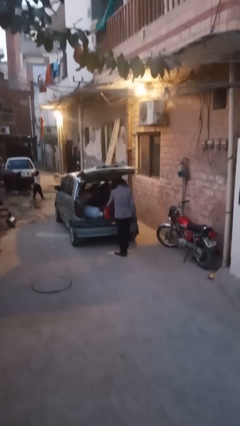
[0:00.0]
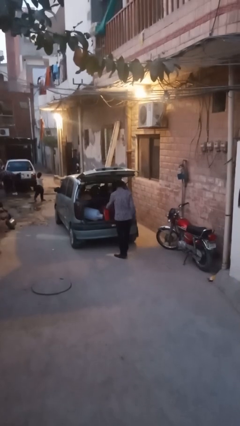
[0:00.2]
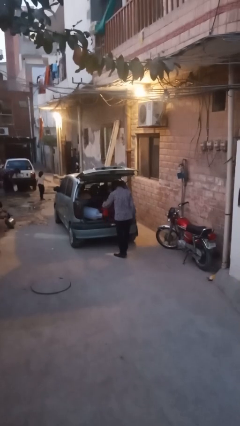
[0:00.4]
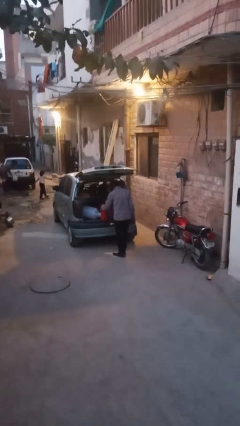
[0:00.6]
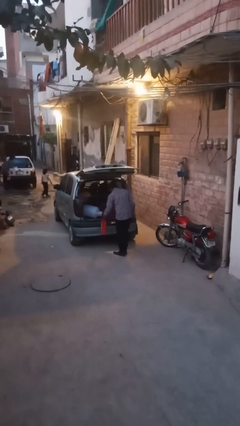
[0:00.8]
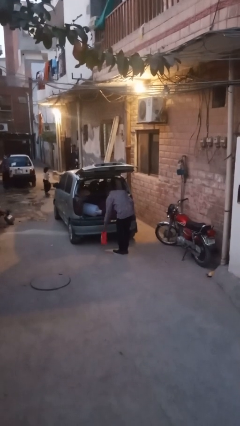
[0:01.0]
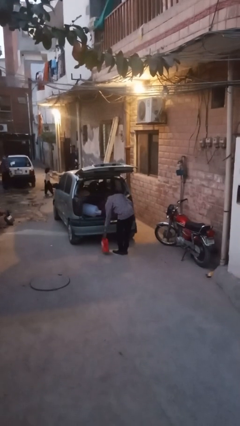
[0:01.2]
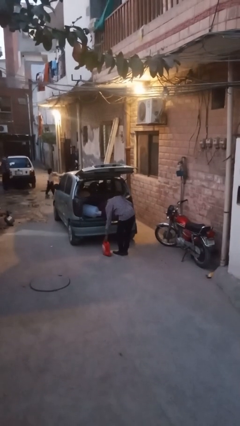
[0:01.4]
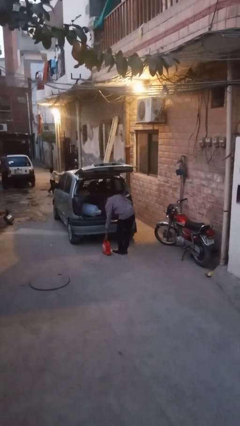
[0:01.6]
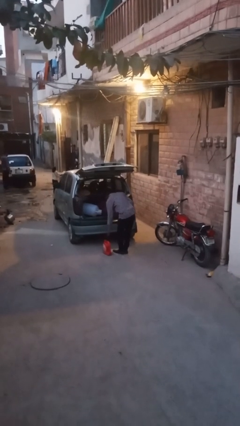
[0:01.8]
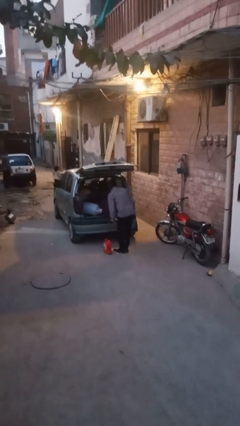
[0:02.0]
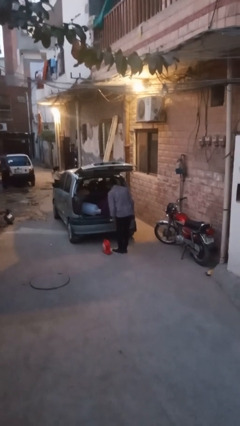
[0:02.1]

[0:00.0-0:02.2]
person unloads car

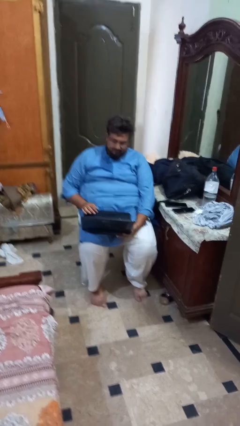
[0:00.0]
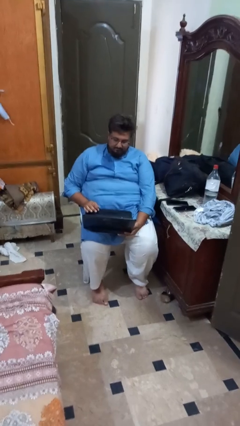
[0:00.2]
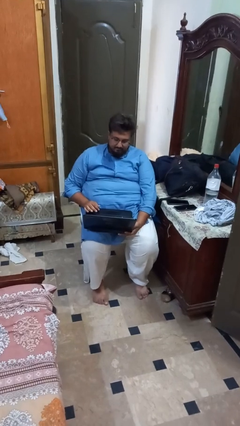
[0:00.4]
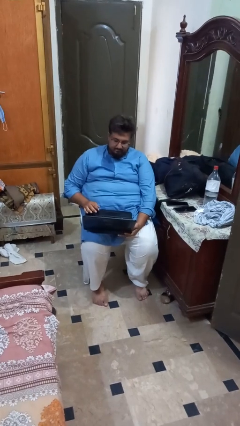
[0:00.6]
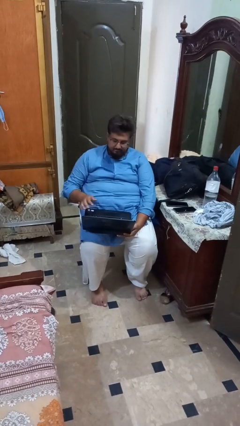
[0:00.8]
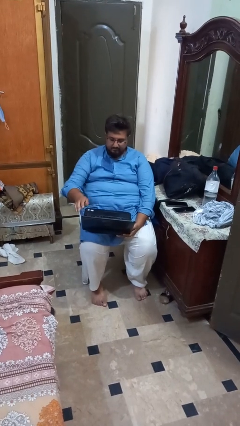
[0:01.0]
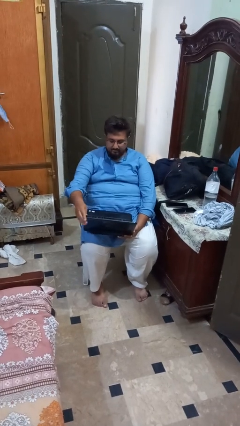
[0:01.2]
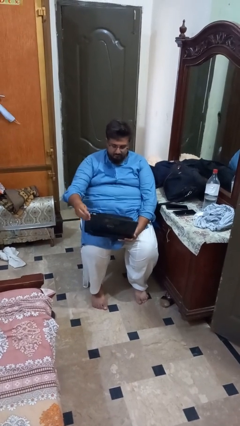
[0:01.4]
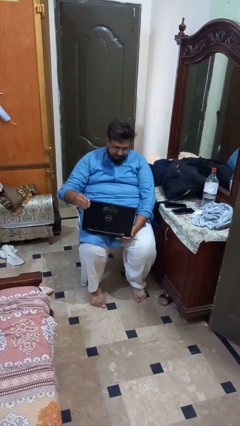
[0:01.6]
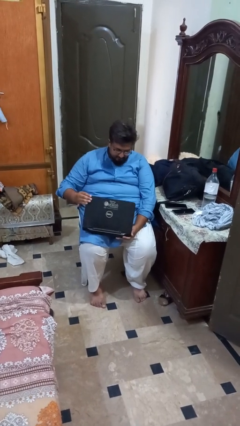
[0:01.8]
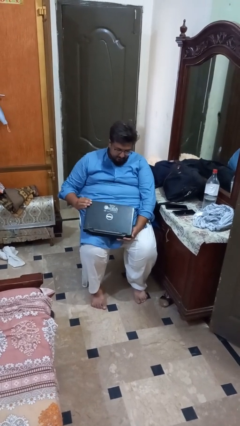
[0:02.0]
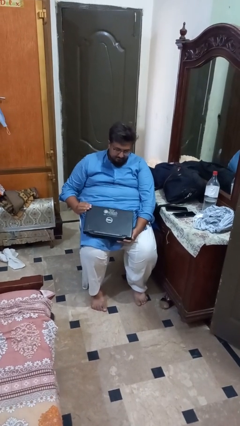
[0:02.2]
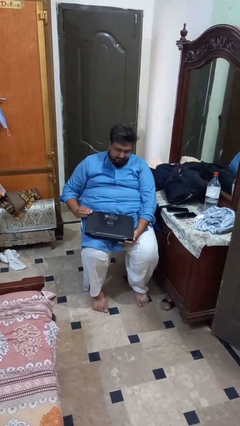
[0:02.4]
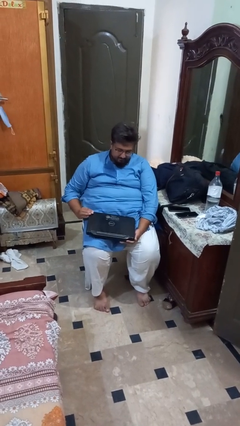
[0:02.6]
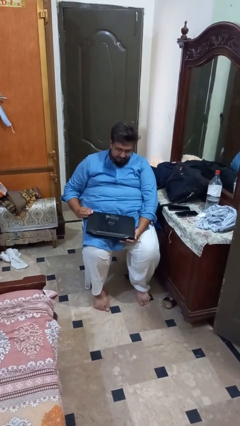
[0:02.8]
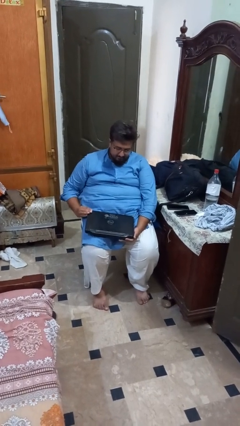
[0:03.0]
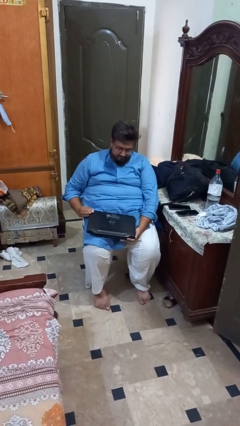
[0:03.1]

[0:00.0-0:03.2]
person closes laptop

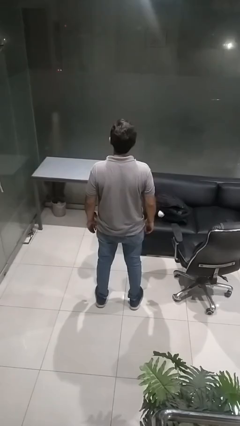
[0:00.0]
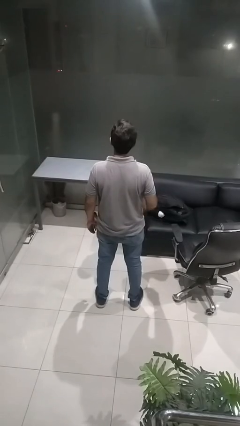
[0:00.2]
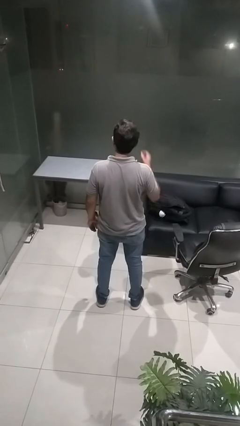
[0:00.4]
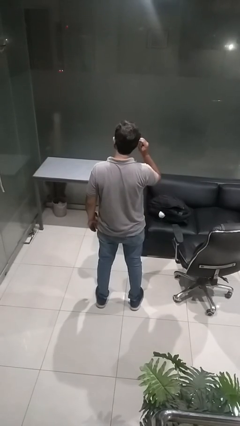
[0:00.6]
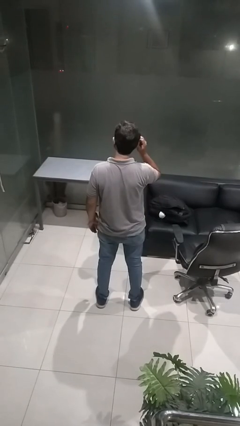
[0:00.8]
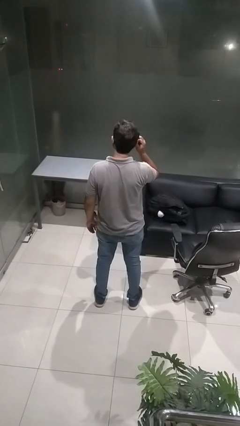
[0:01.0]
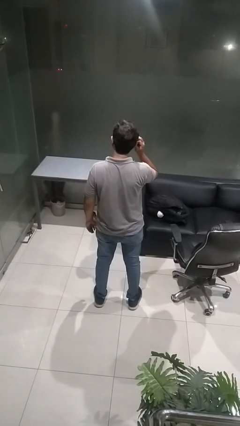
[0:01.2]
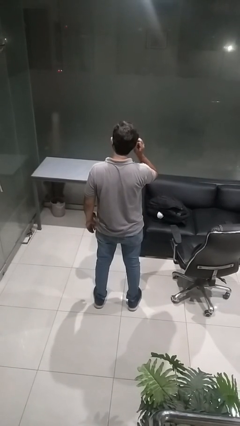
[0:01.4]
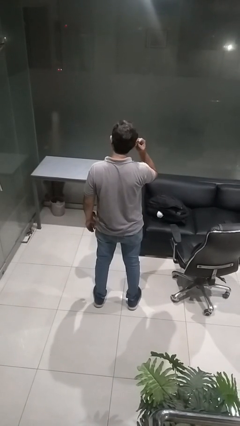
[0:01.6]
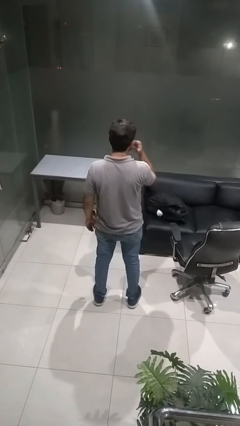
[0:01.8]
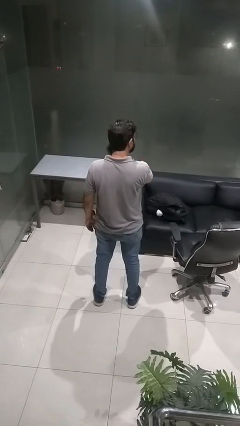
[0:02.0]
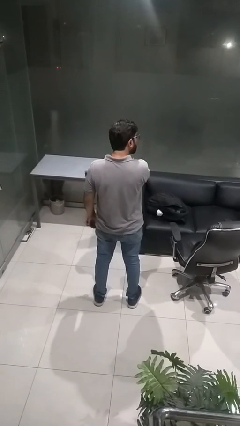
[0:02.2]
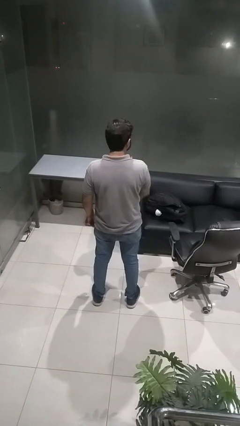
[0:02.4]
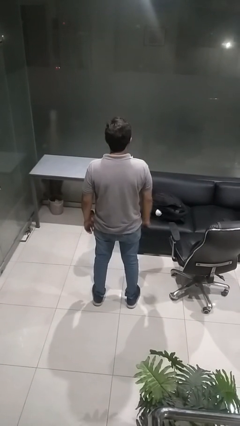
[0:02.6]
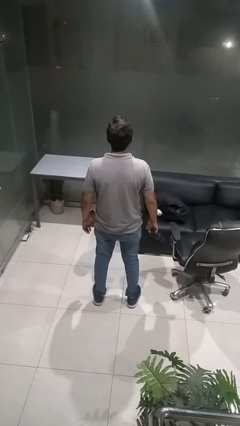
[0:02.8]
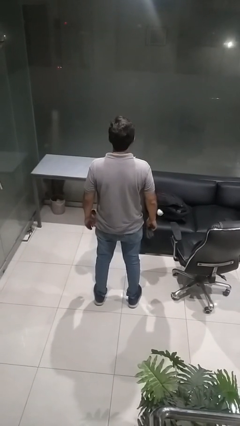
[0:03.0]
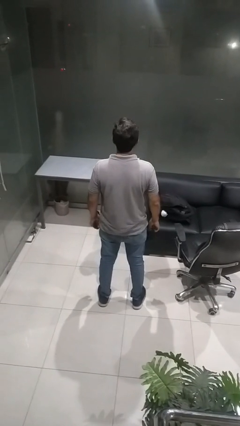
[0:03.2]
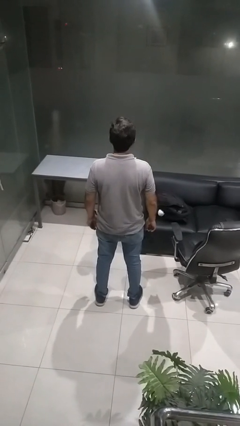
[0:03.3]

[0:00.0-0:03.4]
person takes off facemask

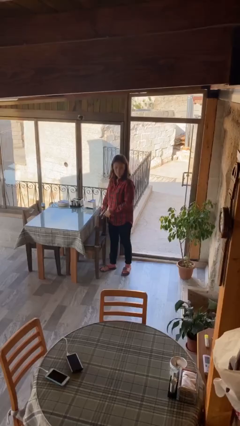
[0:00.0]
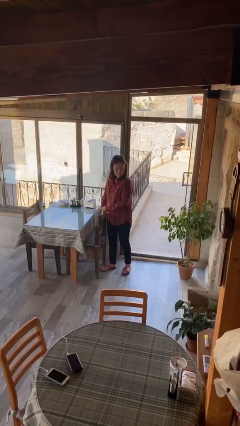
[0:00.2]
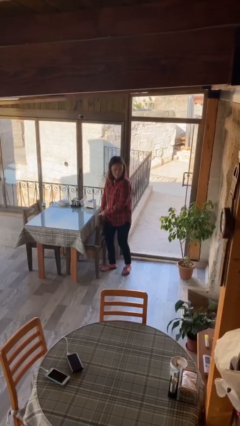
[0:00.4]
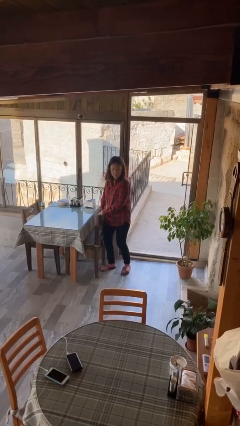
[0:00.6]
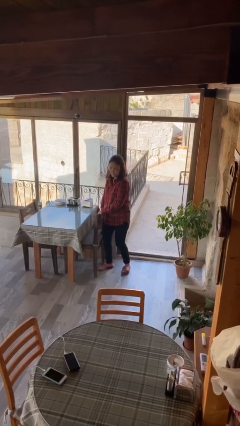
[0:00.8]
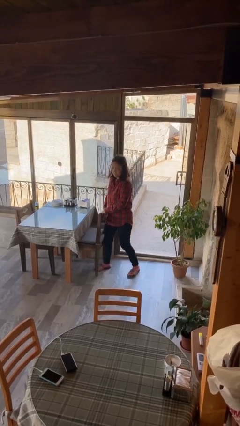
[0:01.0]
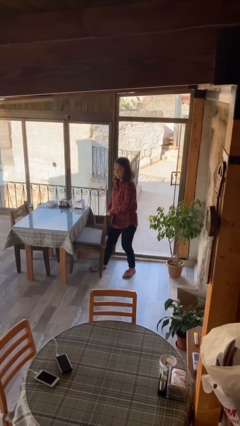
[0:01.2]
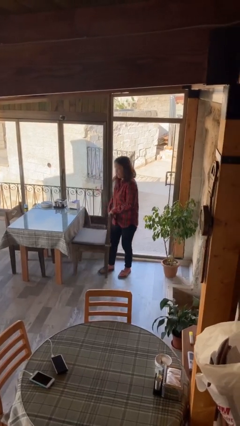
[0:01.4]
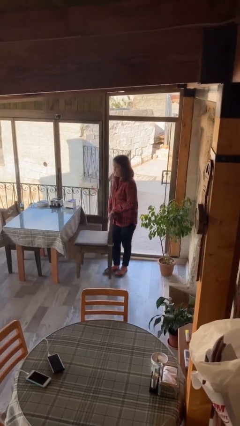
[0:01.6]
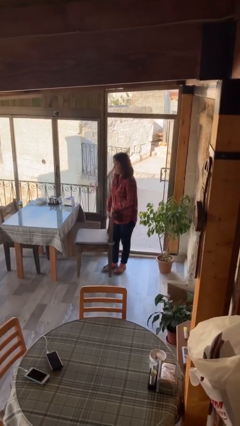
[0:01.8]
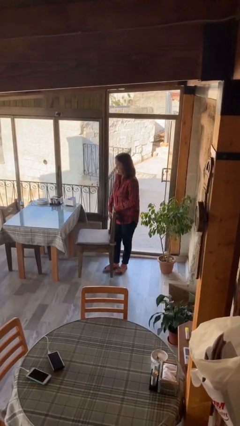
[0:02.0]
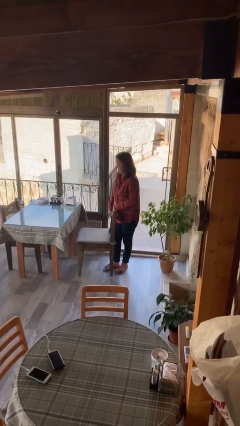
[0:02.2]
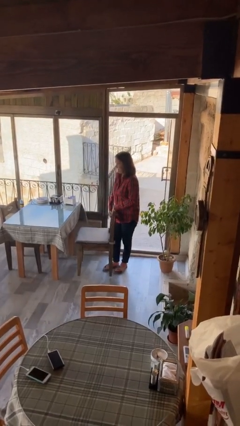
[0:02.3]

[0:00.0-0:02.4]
person pulls out chair

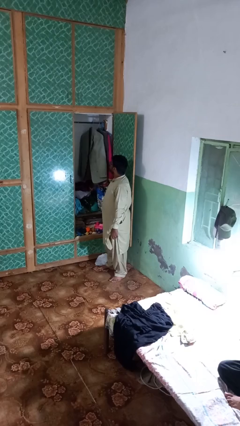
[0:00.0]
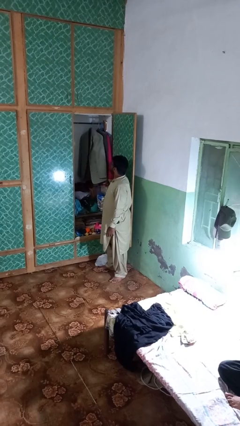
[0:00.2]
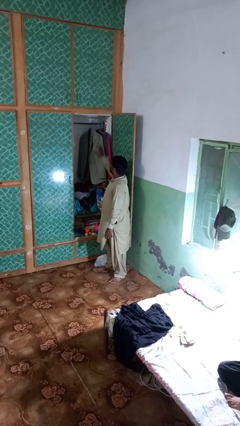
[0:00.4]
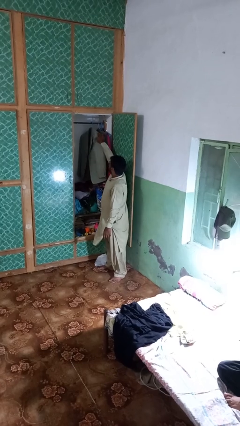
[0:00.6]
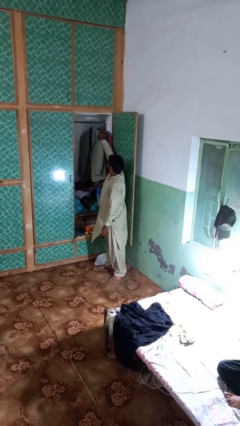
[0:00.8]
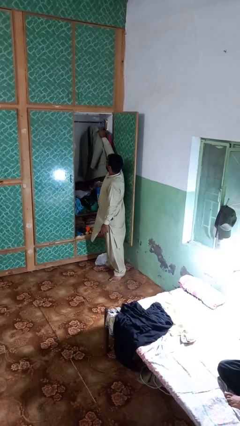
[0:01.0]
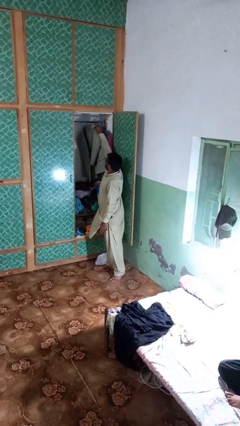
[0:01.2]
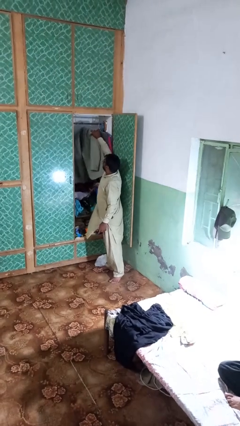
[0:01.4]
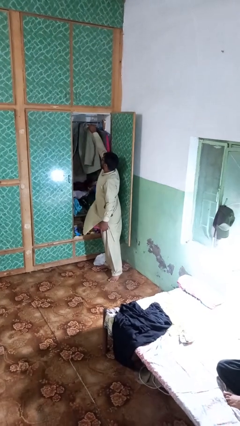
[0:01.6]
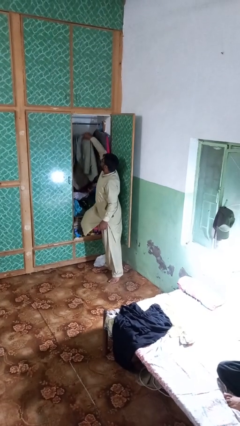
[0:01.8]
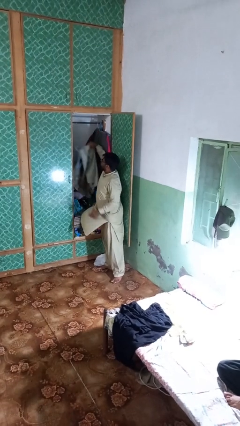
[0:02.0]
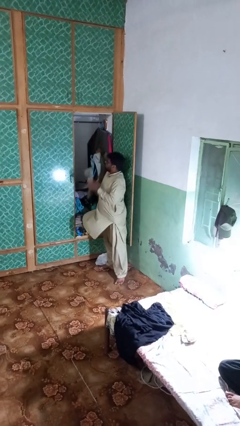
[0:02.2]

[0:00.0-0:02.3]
person takes clothes from closet

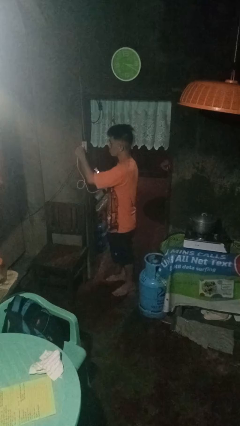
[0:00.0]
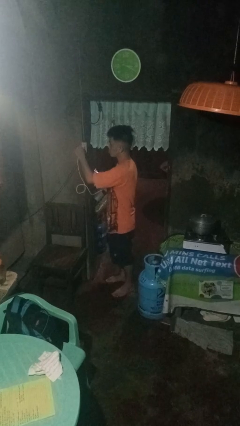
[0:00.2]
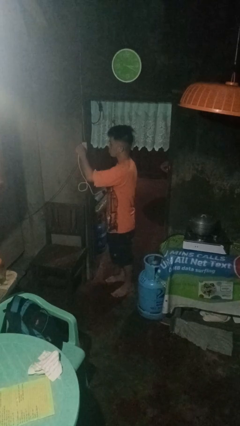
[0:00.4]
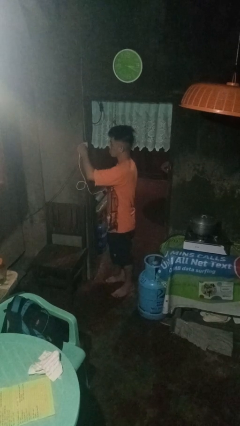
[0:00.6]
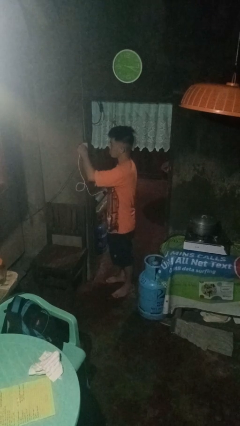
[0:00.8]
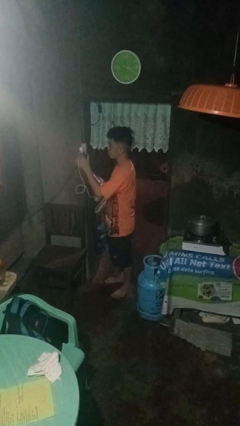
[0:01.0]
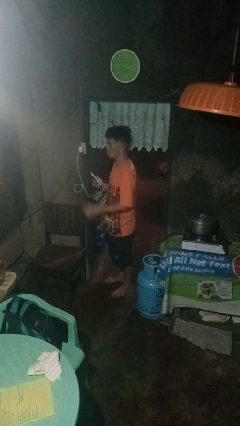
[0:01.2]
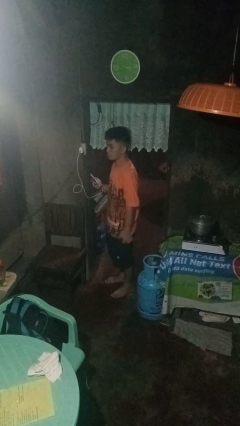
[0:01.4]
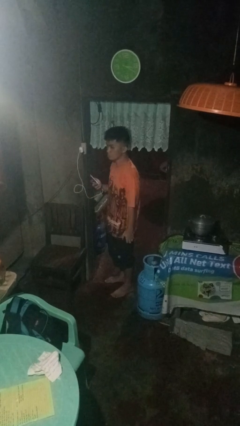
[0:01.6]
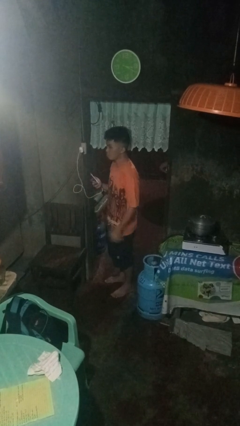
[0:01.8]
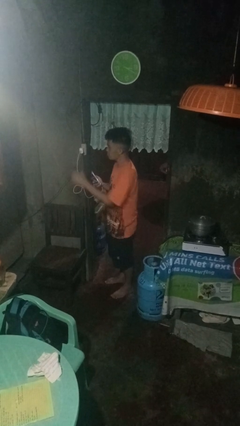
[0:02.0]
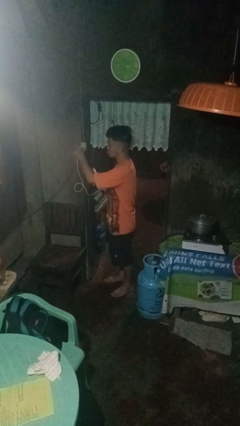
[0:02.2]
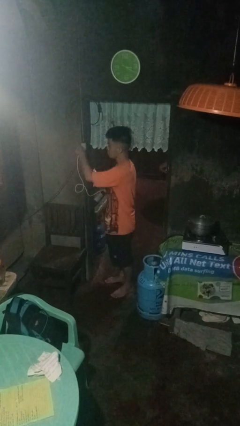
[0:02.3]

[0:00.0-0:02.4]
person plugs into electrical socket

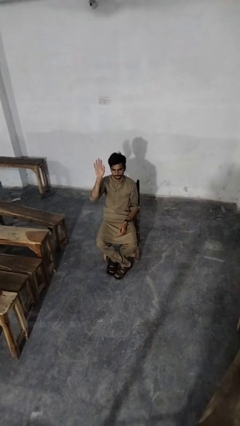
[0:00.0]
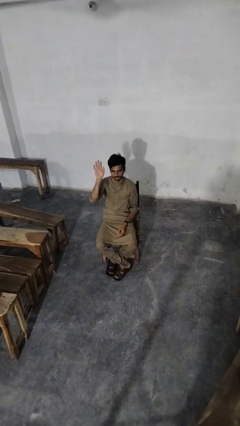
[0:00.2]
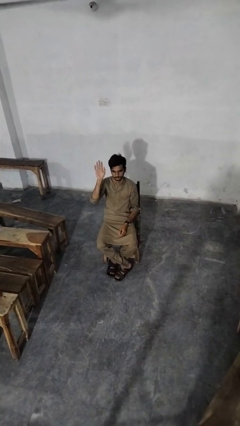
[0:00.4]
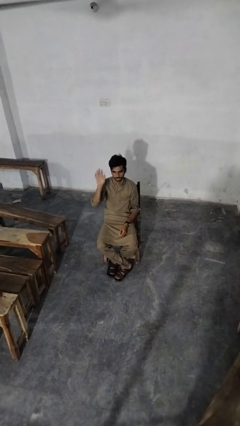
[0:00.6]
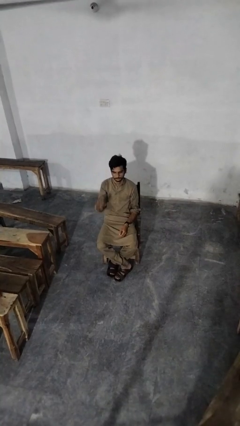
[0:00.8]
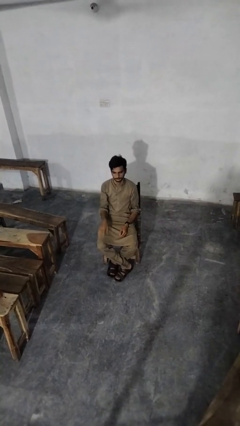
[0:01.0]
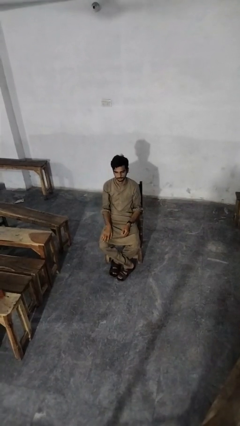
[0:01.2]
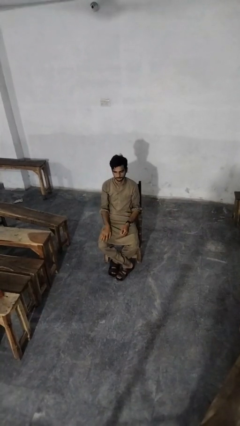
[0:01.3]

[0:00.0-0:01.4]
person gestures lower hand
